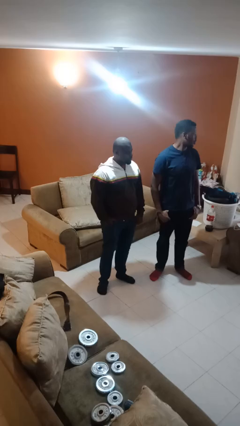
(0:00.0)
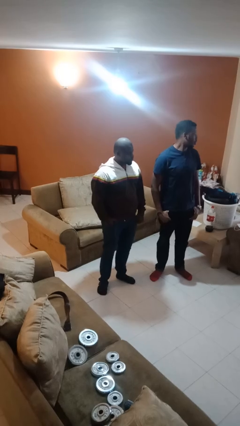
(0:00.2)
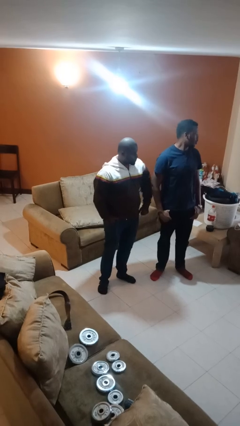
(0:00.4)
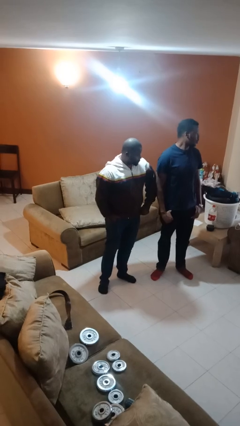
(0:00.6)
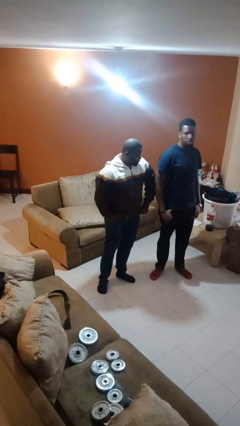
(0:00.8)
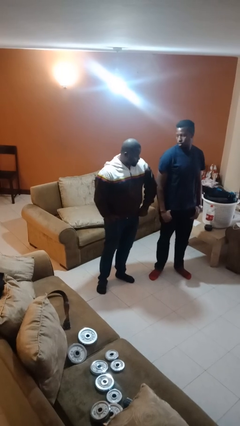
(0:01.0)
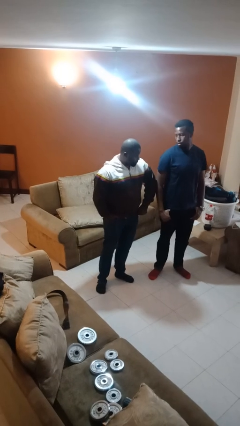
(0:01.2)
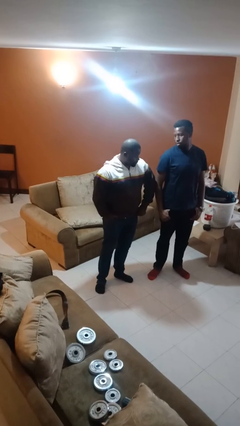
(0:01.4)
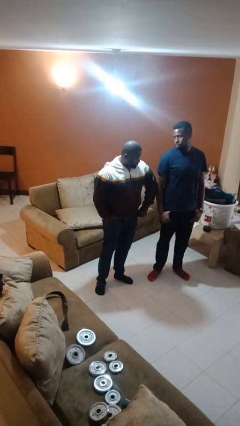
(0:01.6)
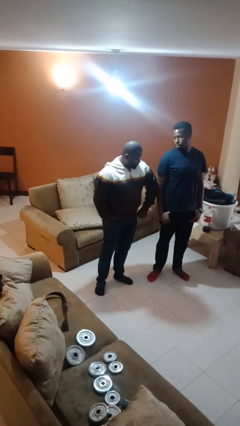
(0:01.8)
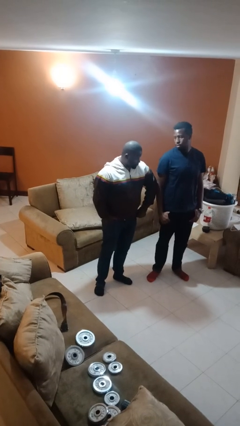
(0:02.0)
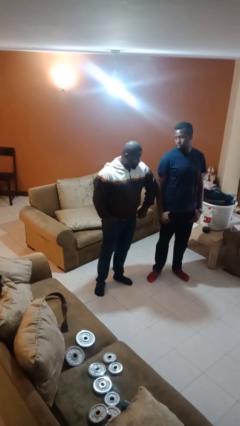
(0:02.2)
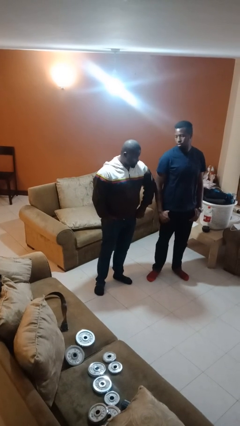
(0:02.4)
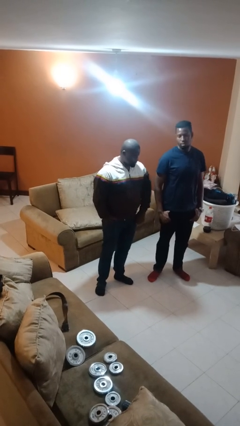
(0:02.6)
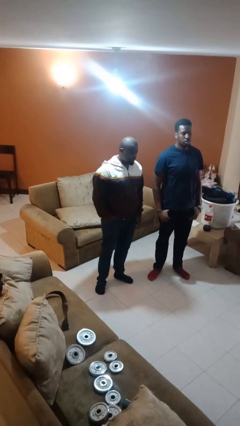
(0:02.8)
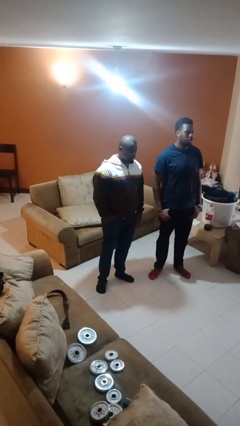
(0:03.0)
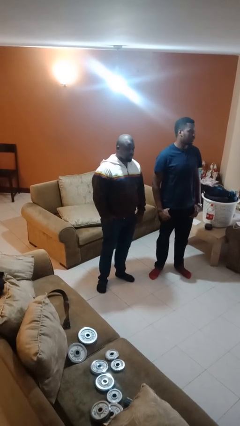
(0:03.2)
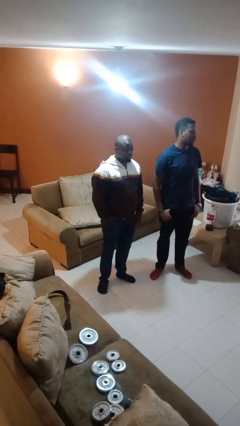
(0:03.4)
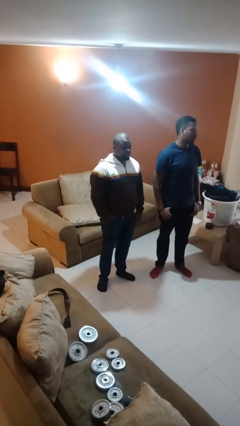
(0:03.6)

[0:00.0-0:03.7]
person nudges person with elbow

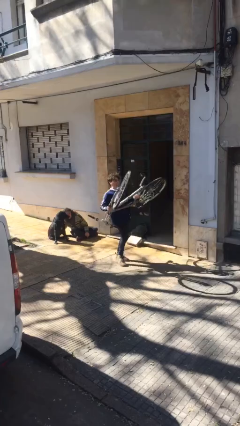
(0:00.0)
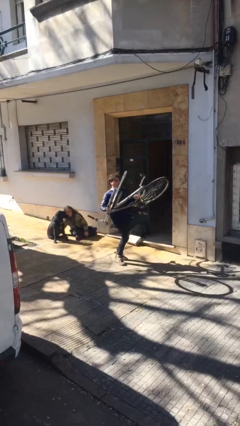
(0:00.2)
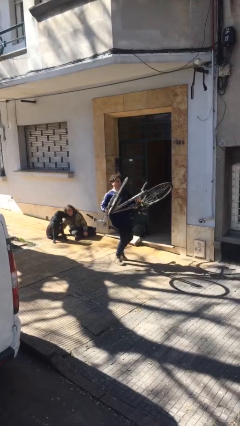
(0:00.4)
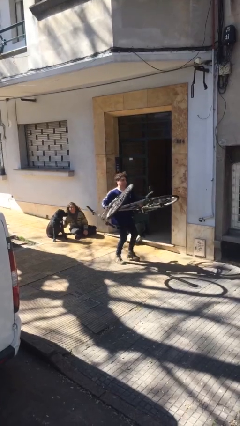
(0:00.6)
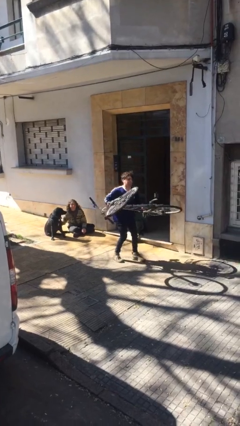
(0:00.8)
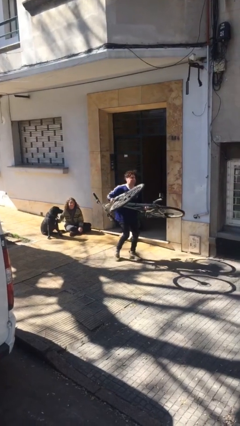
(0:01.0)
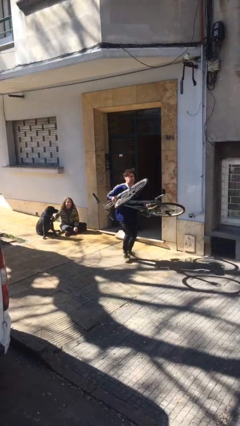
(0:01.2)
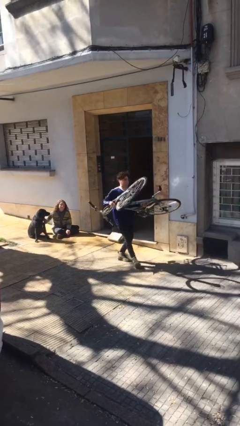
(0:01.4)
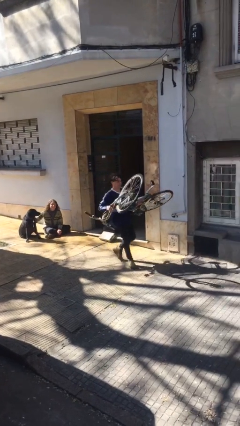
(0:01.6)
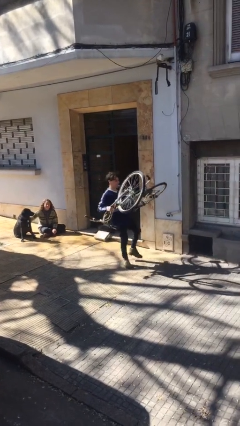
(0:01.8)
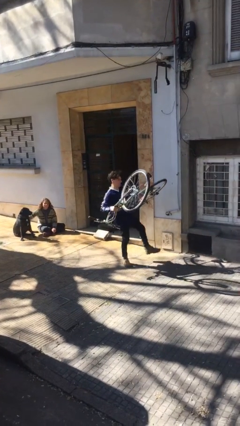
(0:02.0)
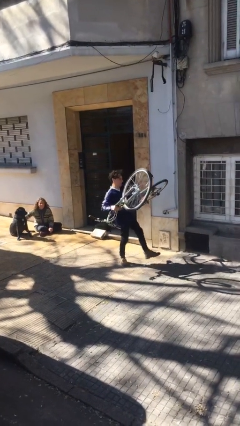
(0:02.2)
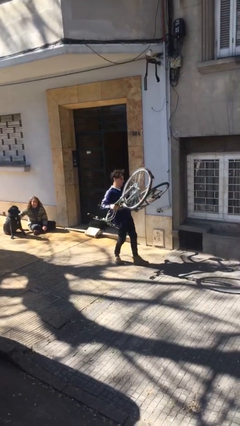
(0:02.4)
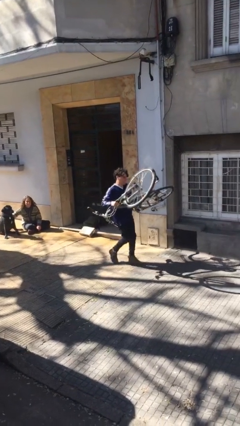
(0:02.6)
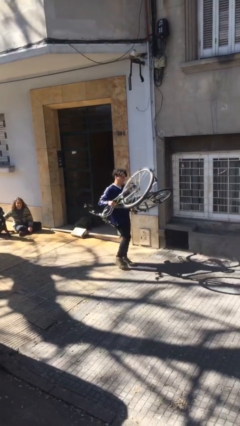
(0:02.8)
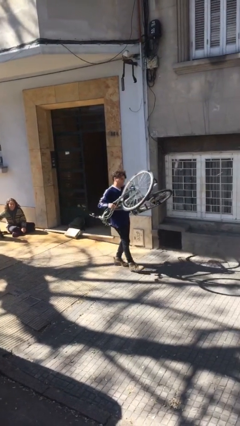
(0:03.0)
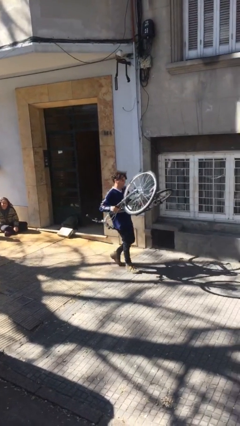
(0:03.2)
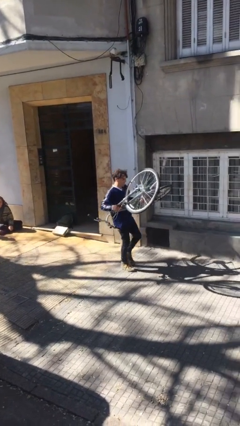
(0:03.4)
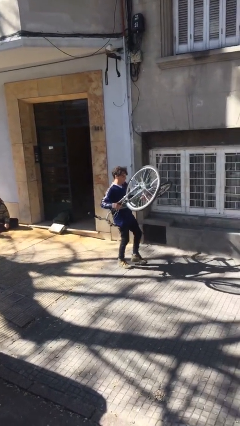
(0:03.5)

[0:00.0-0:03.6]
person carries heavy object

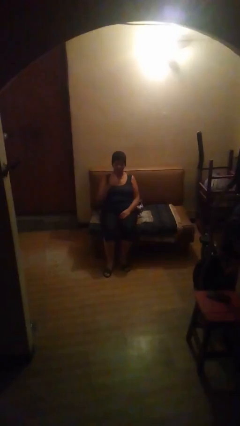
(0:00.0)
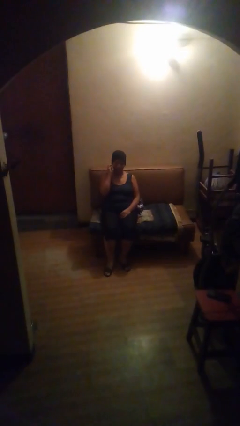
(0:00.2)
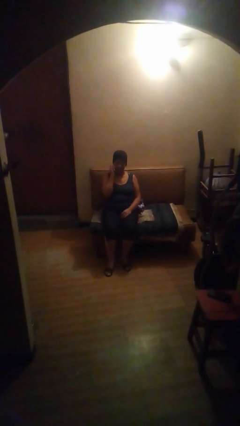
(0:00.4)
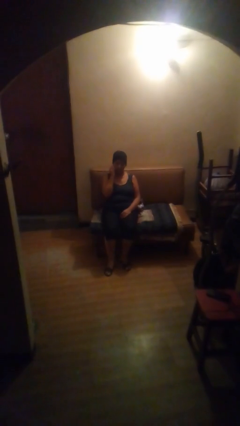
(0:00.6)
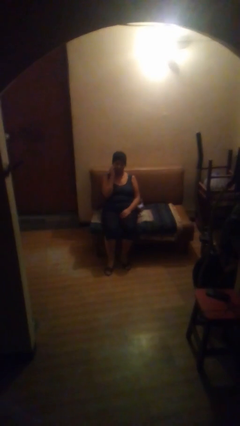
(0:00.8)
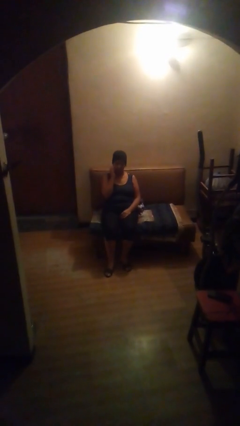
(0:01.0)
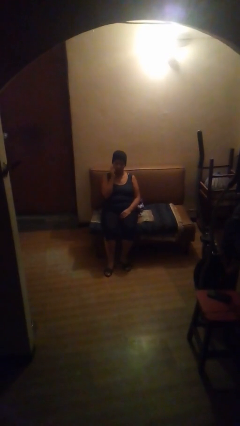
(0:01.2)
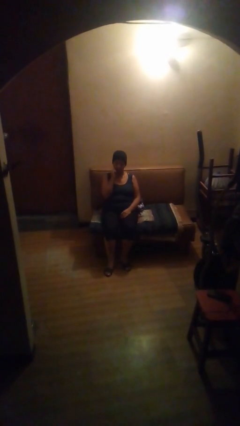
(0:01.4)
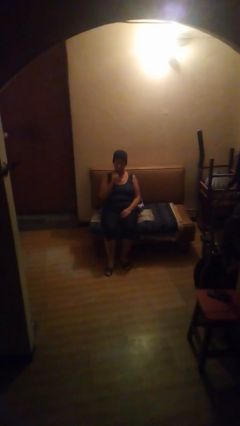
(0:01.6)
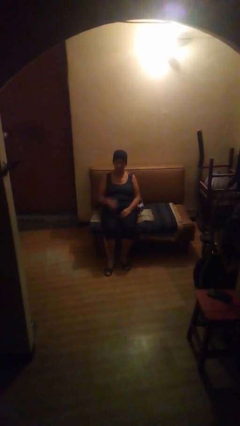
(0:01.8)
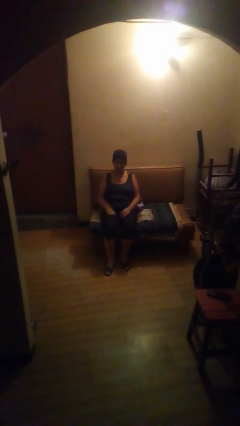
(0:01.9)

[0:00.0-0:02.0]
person scratches face

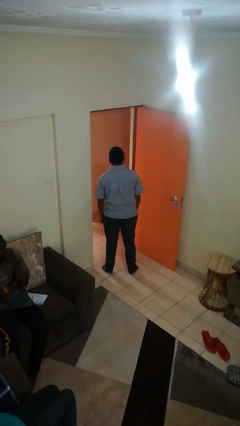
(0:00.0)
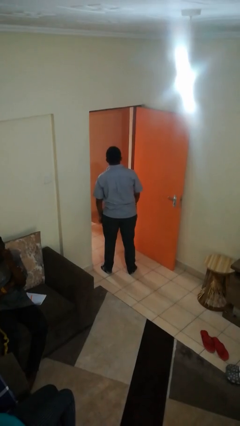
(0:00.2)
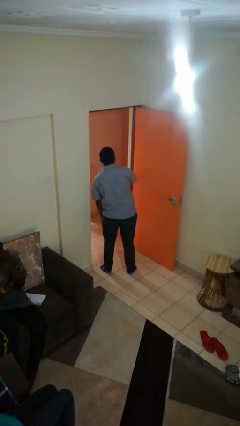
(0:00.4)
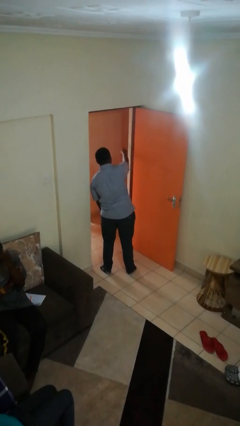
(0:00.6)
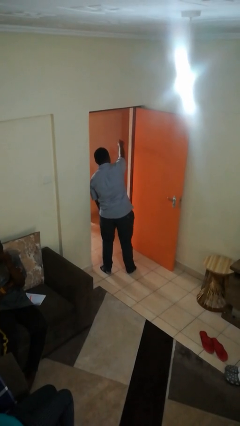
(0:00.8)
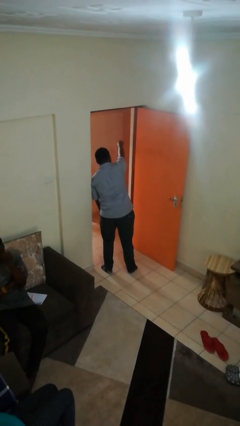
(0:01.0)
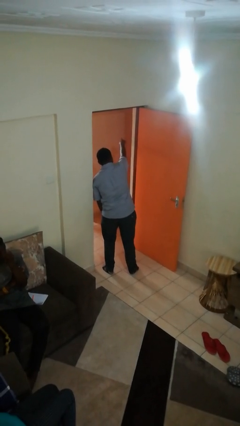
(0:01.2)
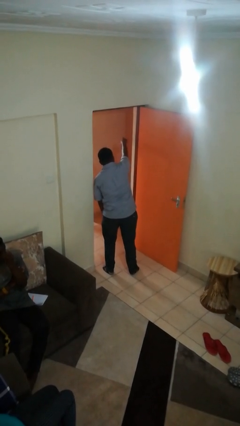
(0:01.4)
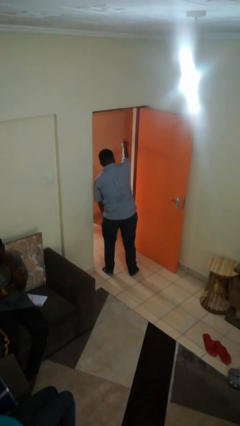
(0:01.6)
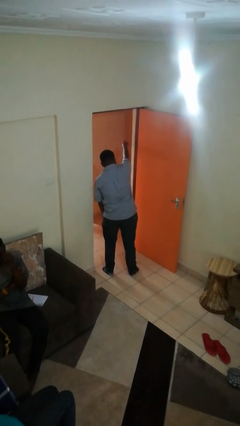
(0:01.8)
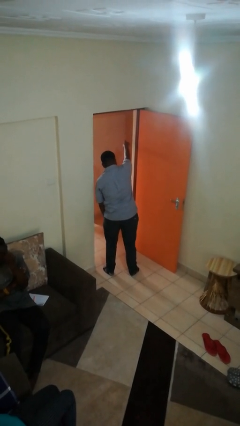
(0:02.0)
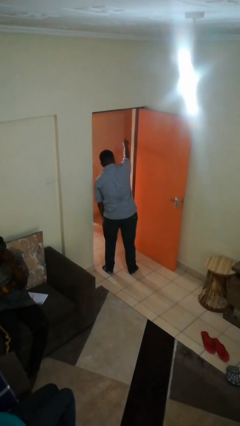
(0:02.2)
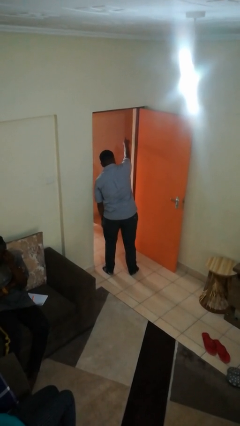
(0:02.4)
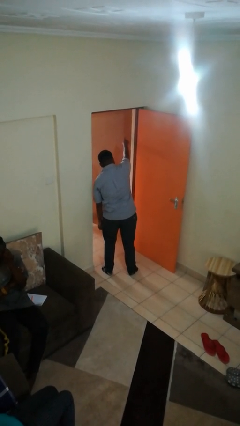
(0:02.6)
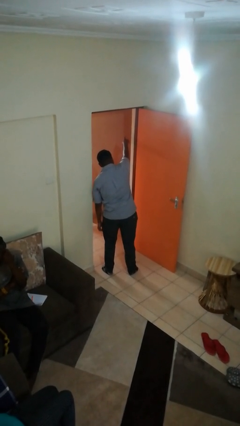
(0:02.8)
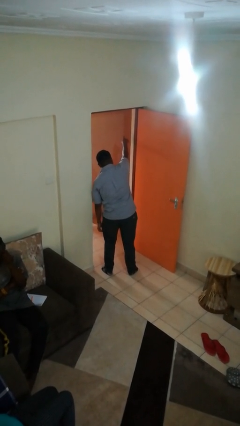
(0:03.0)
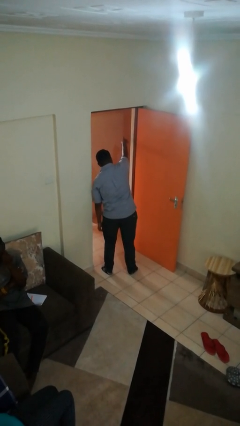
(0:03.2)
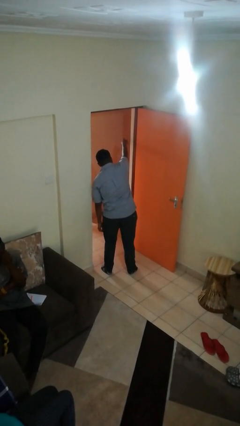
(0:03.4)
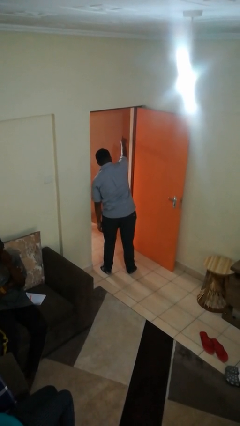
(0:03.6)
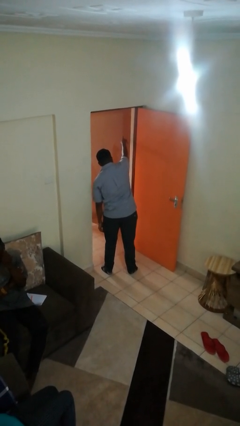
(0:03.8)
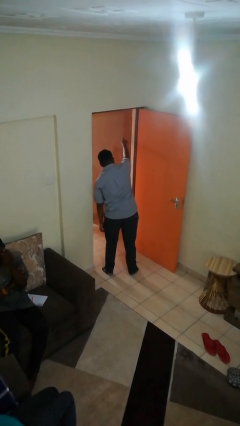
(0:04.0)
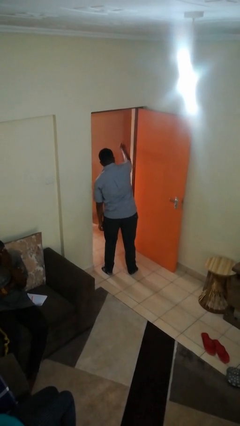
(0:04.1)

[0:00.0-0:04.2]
person points at person

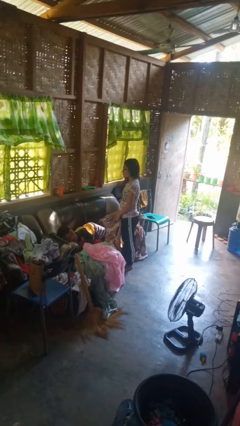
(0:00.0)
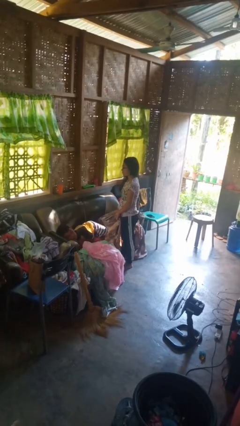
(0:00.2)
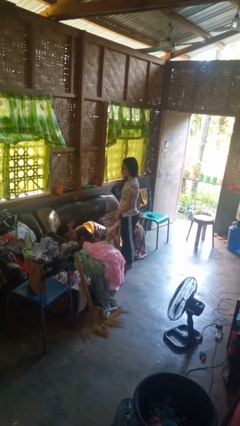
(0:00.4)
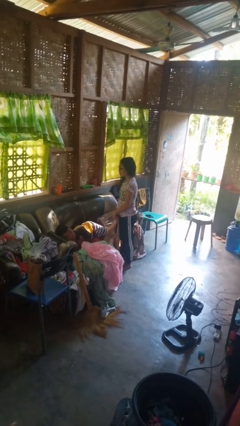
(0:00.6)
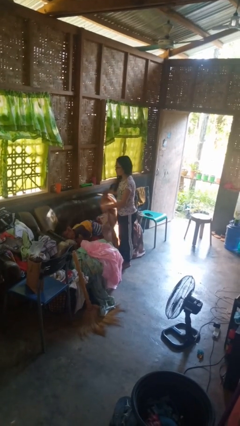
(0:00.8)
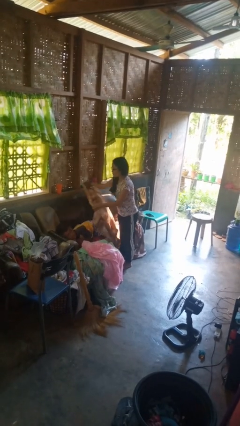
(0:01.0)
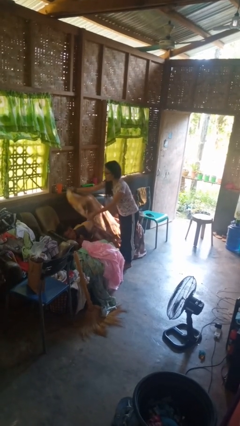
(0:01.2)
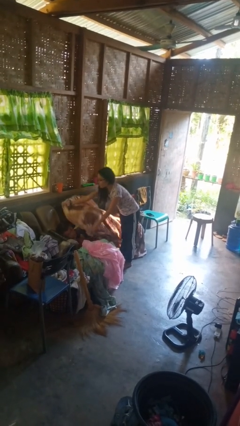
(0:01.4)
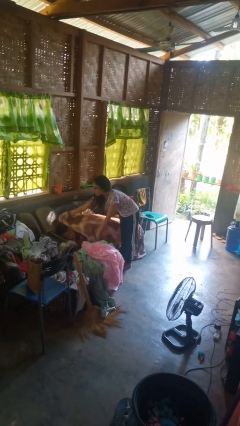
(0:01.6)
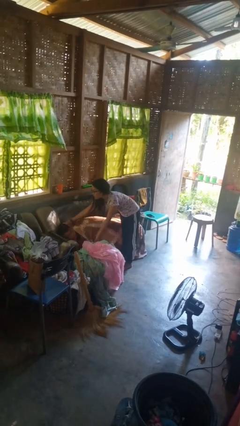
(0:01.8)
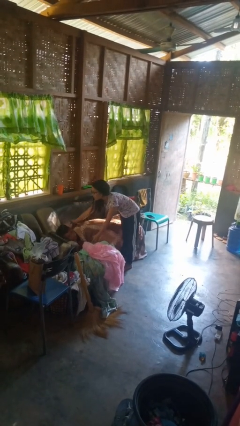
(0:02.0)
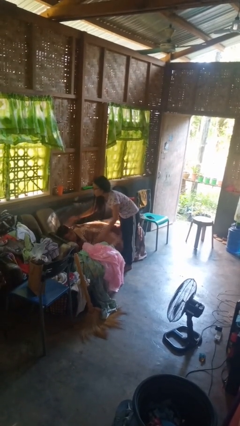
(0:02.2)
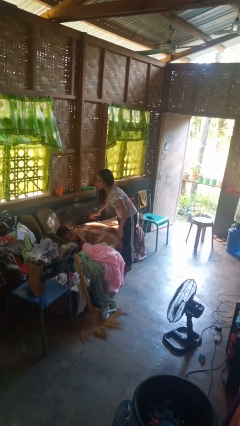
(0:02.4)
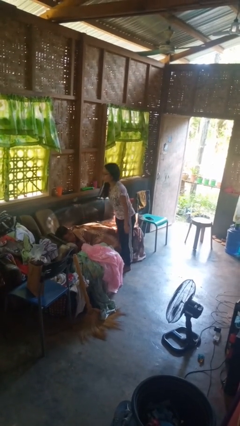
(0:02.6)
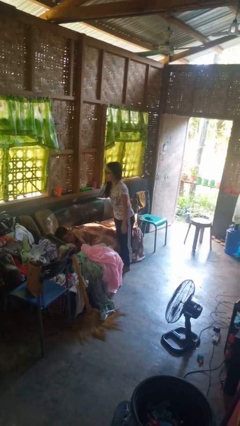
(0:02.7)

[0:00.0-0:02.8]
person covers friend with blanket

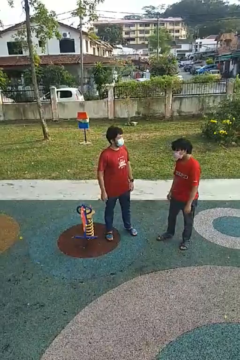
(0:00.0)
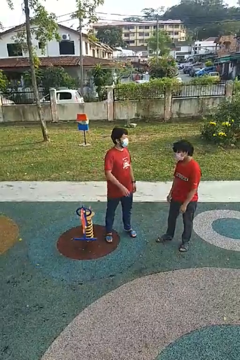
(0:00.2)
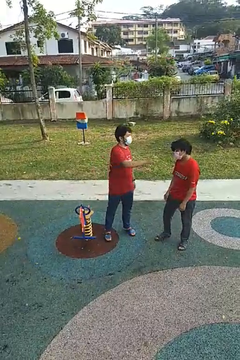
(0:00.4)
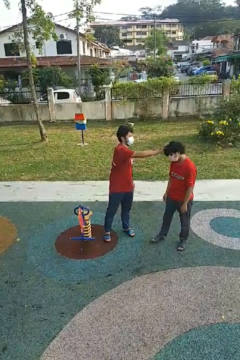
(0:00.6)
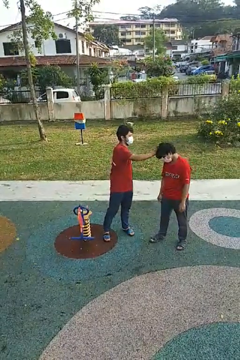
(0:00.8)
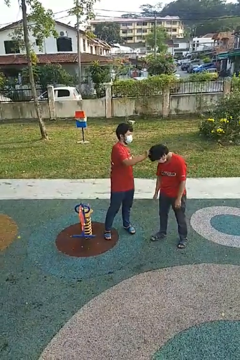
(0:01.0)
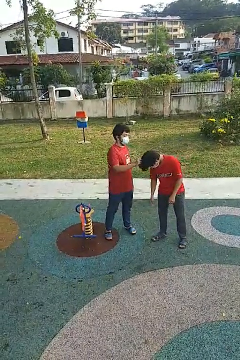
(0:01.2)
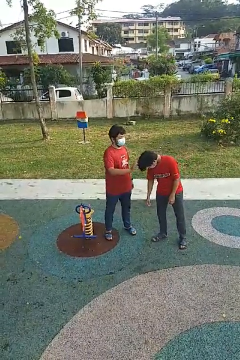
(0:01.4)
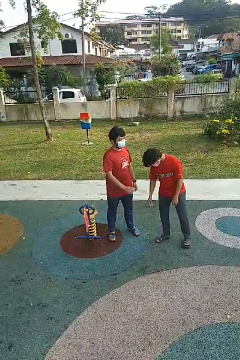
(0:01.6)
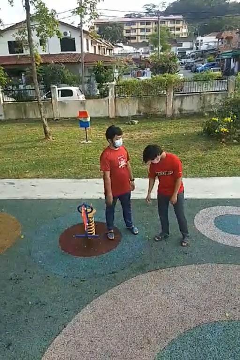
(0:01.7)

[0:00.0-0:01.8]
person grabs person by hair
